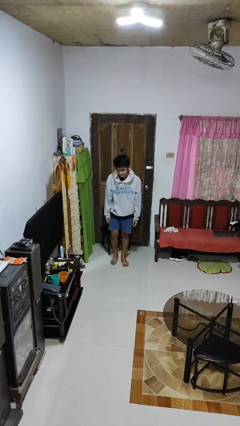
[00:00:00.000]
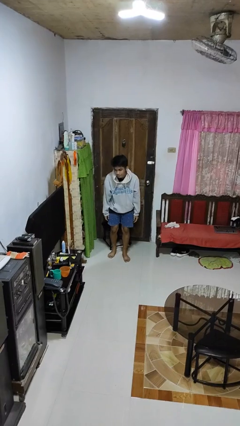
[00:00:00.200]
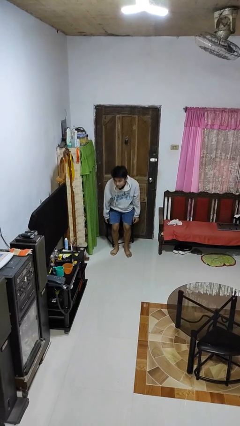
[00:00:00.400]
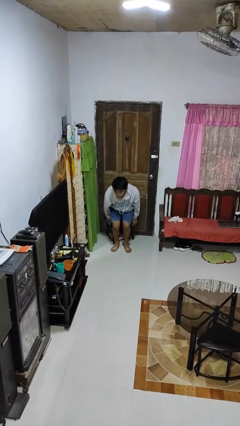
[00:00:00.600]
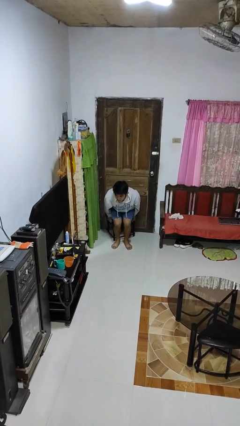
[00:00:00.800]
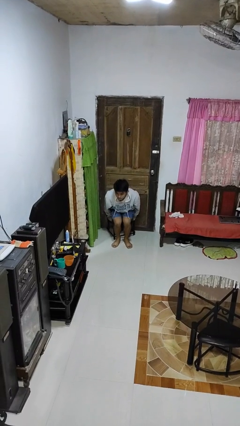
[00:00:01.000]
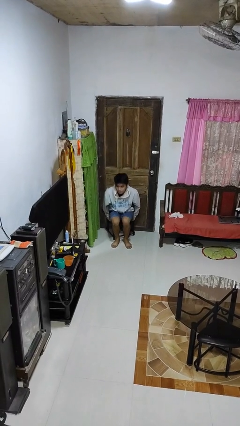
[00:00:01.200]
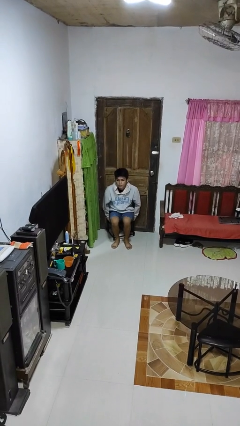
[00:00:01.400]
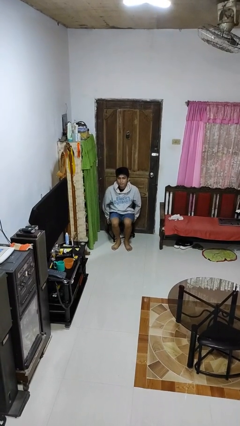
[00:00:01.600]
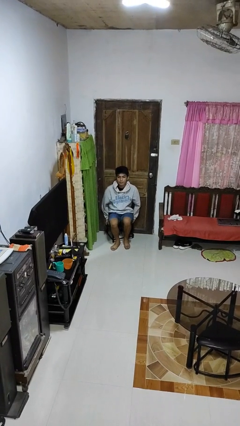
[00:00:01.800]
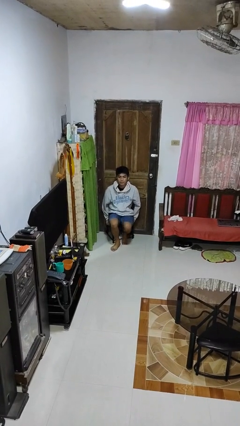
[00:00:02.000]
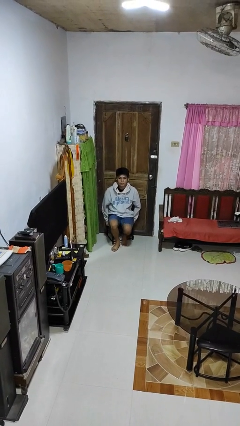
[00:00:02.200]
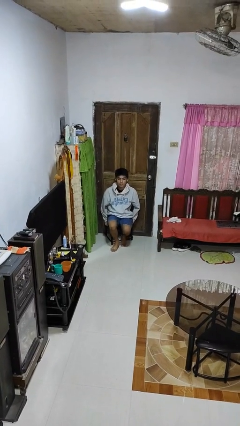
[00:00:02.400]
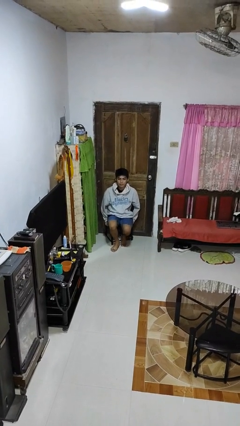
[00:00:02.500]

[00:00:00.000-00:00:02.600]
person sits down

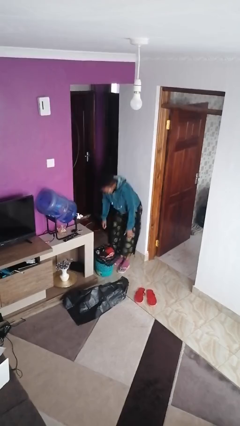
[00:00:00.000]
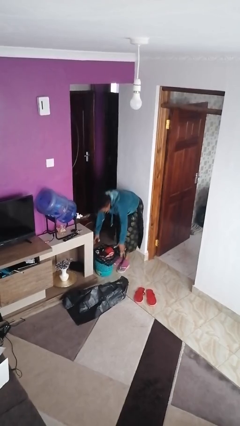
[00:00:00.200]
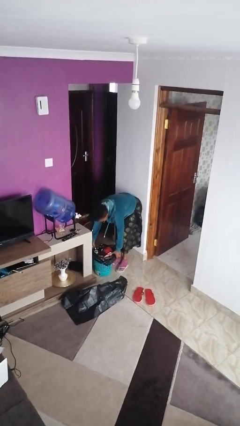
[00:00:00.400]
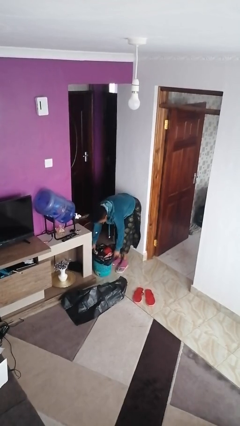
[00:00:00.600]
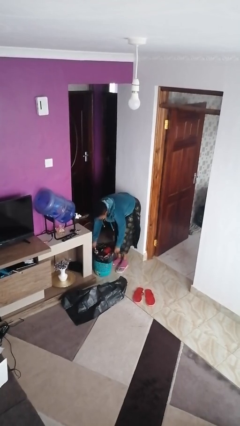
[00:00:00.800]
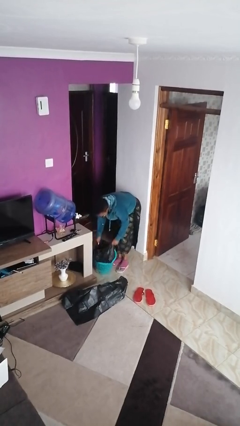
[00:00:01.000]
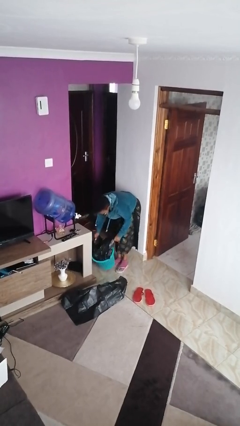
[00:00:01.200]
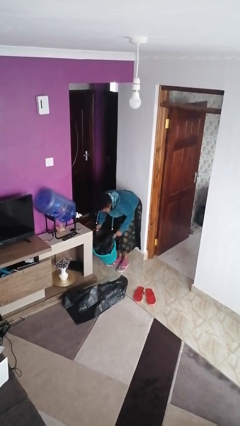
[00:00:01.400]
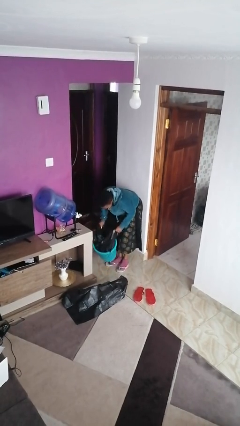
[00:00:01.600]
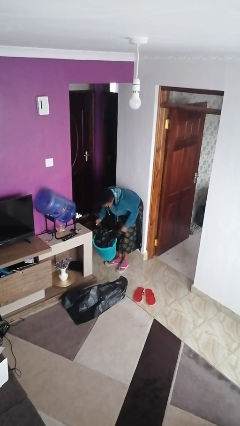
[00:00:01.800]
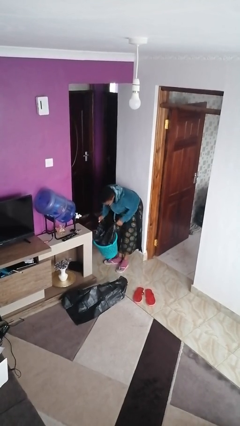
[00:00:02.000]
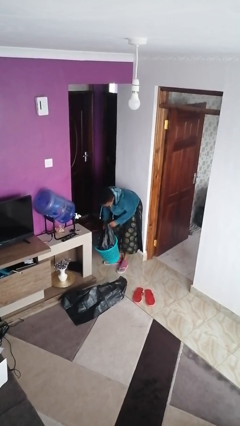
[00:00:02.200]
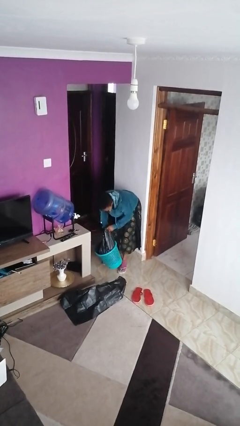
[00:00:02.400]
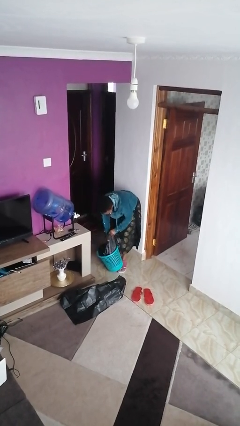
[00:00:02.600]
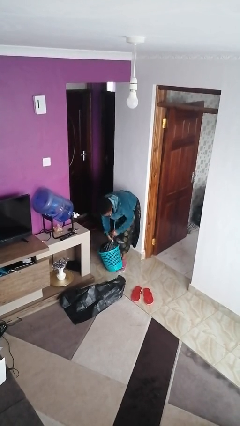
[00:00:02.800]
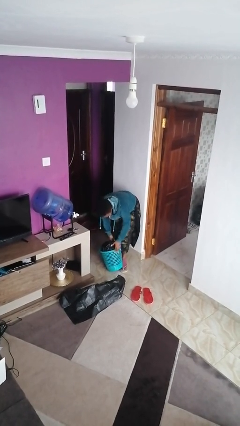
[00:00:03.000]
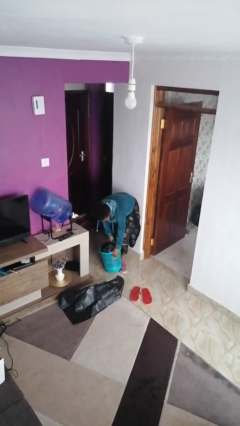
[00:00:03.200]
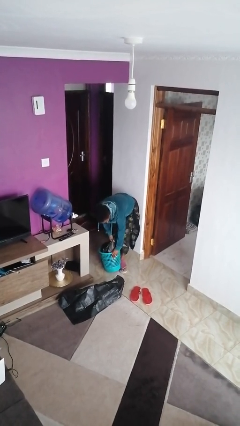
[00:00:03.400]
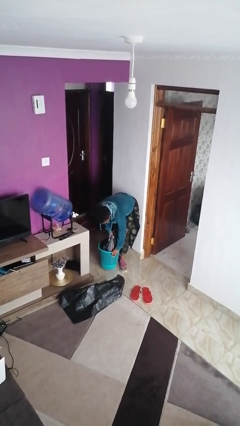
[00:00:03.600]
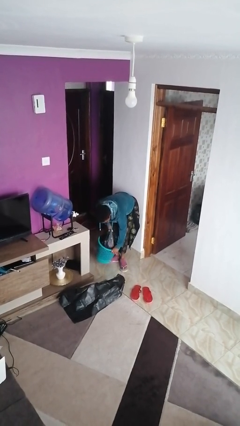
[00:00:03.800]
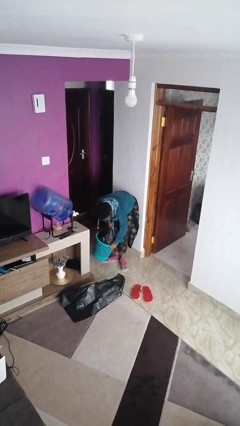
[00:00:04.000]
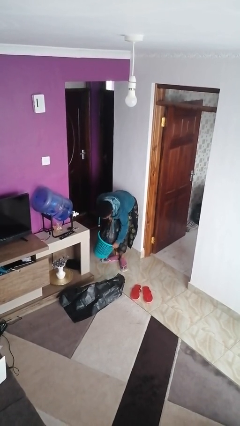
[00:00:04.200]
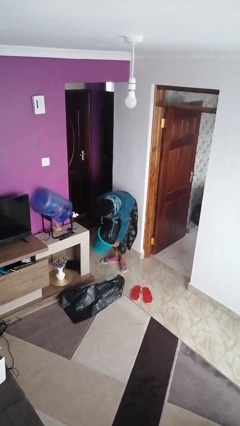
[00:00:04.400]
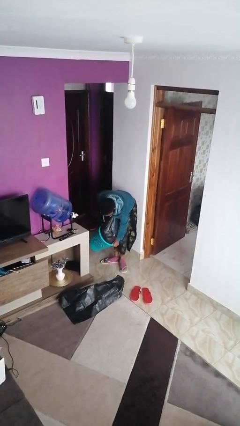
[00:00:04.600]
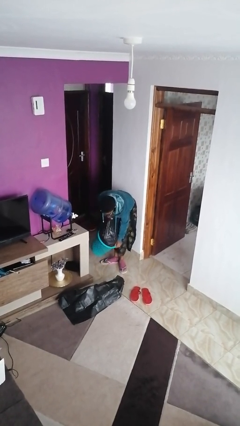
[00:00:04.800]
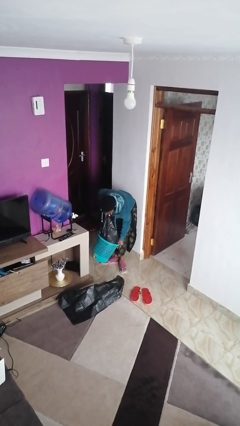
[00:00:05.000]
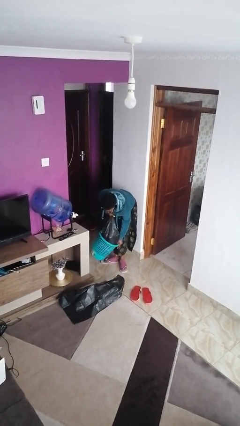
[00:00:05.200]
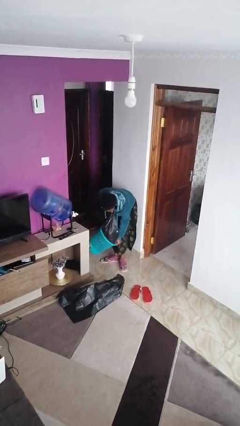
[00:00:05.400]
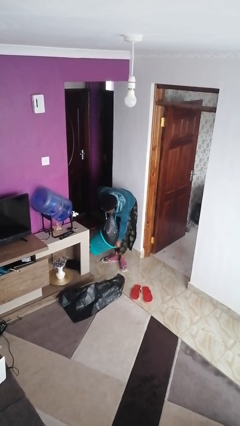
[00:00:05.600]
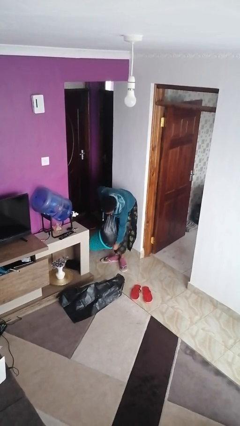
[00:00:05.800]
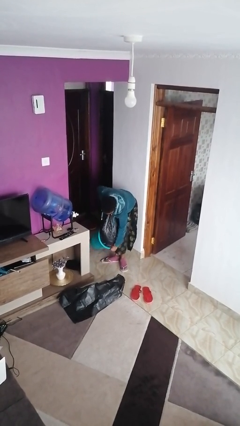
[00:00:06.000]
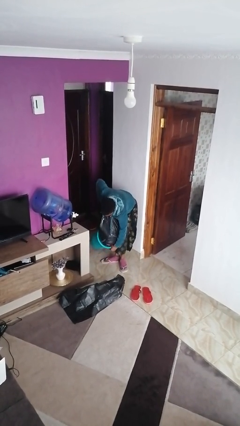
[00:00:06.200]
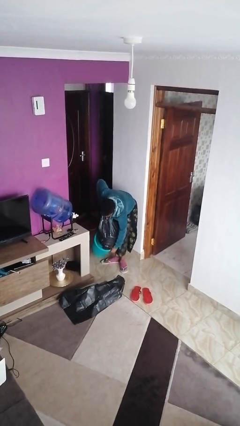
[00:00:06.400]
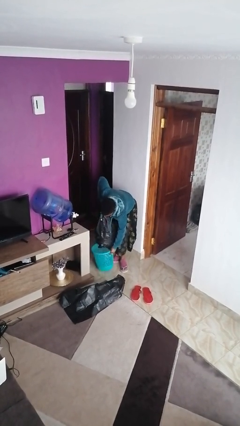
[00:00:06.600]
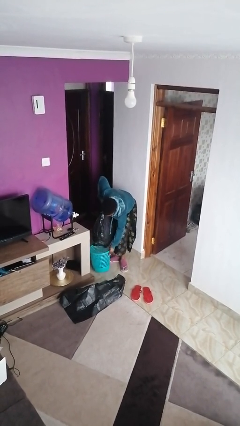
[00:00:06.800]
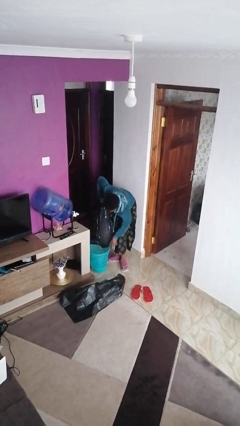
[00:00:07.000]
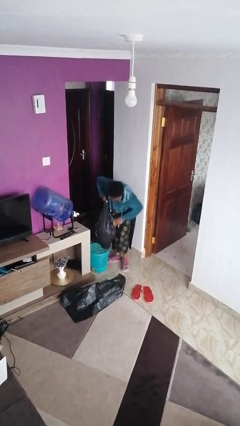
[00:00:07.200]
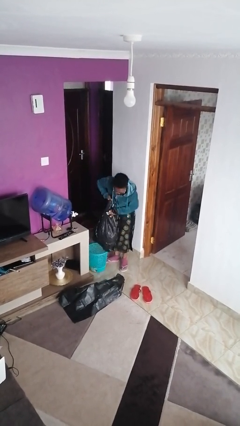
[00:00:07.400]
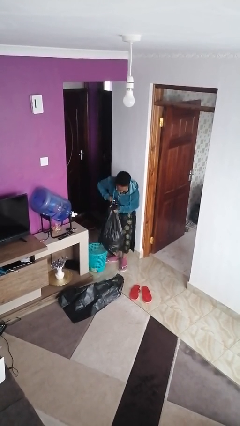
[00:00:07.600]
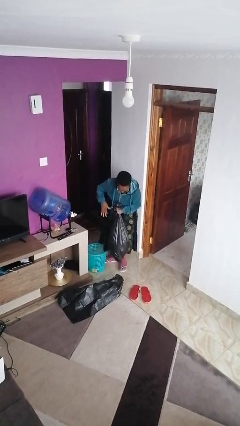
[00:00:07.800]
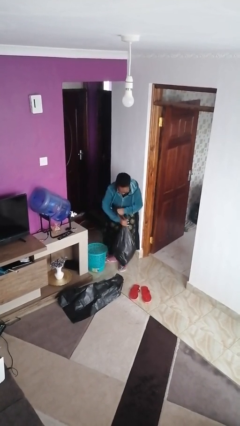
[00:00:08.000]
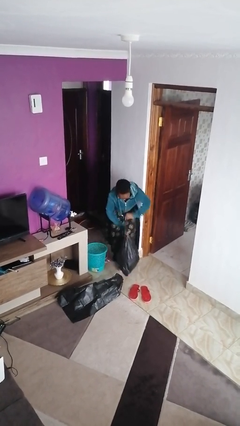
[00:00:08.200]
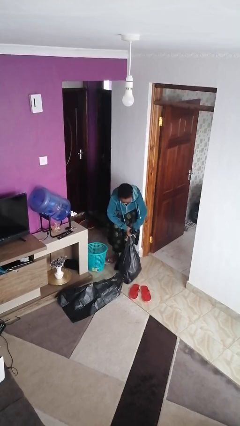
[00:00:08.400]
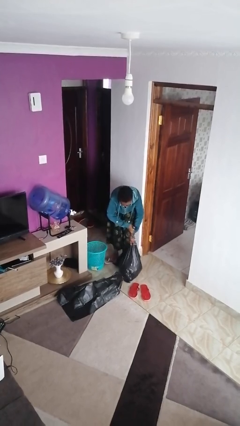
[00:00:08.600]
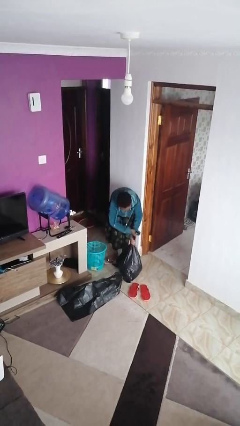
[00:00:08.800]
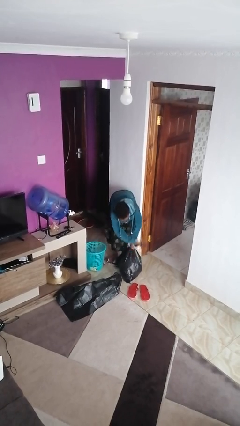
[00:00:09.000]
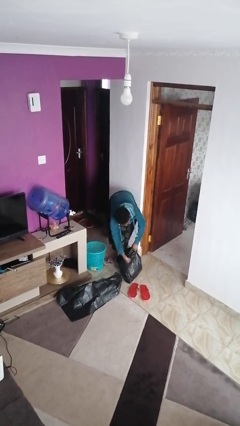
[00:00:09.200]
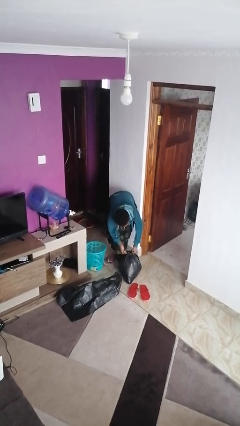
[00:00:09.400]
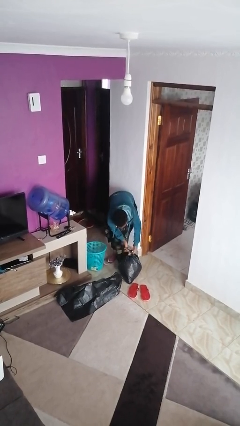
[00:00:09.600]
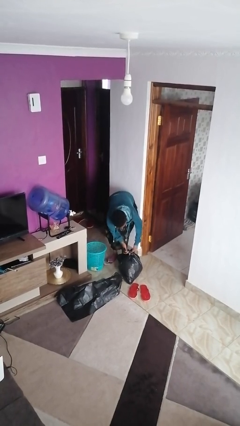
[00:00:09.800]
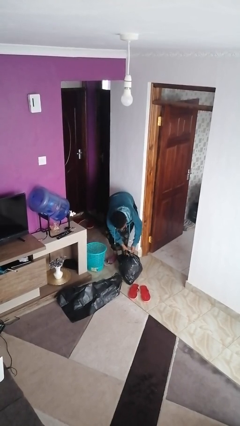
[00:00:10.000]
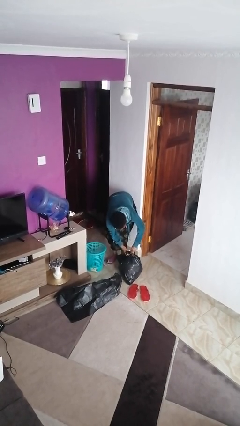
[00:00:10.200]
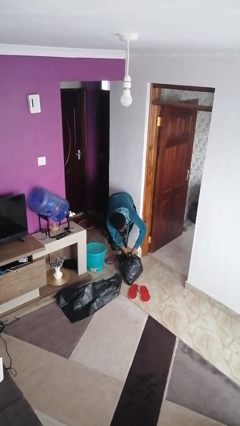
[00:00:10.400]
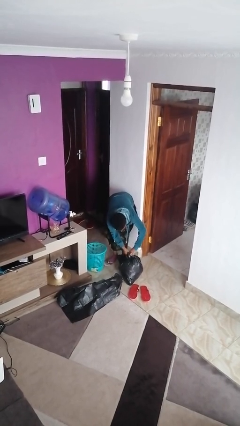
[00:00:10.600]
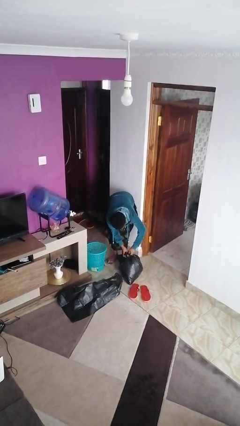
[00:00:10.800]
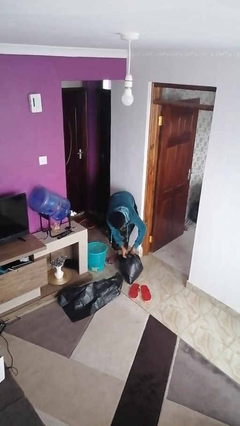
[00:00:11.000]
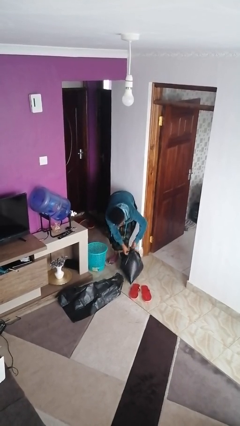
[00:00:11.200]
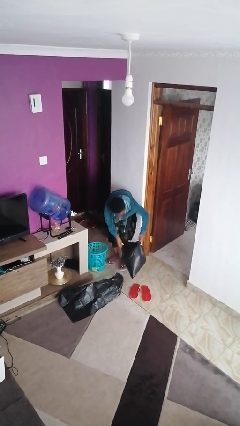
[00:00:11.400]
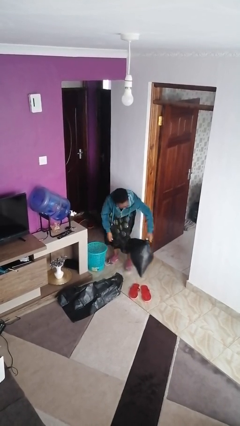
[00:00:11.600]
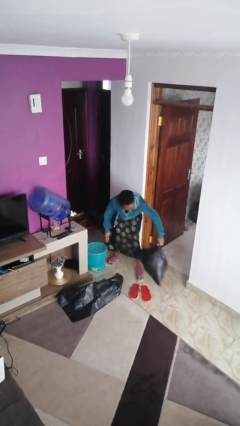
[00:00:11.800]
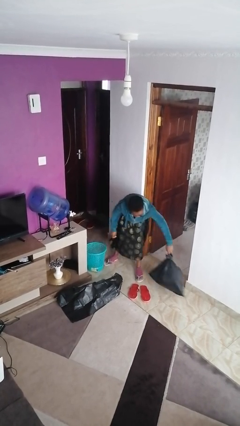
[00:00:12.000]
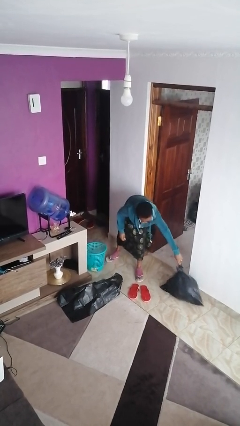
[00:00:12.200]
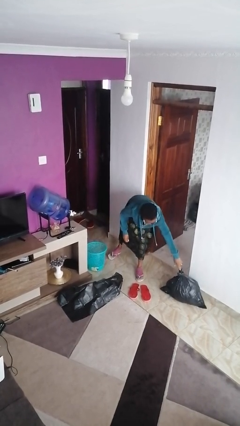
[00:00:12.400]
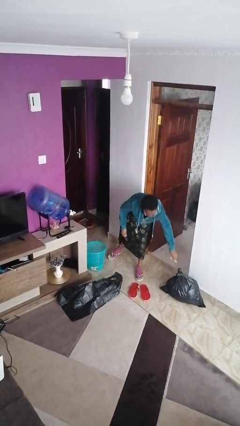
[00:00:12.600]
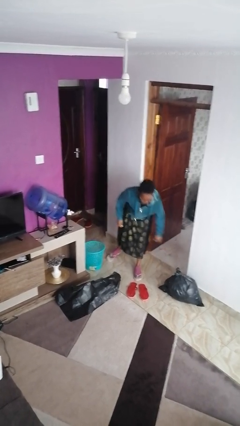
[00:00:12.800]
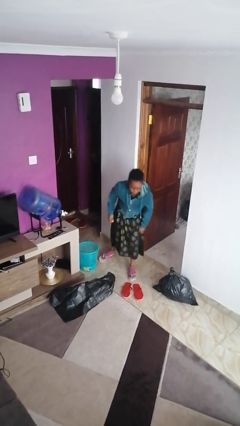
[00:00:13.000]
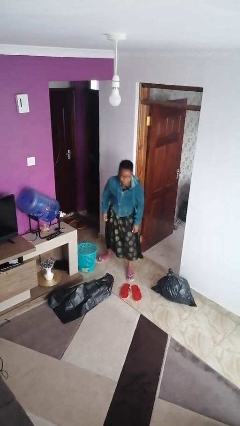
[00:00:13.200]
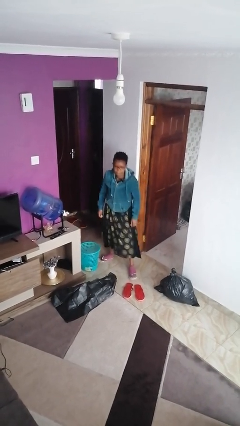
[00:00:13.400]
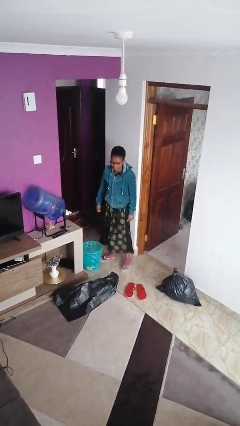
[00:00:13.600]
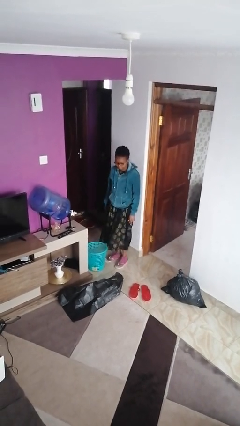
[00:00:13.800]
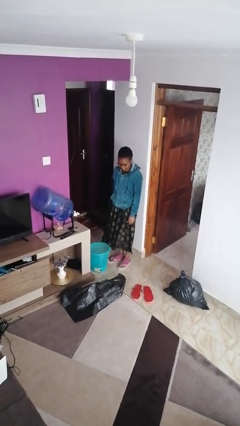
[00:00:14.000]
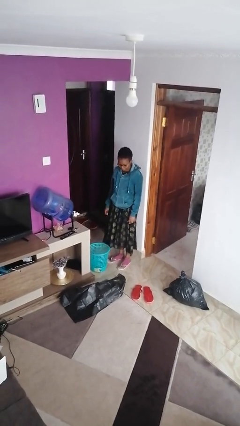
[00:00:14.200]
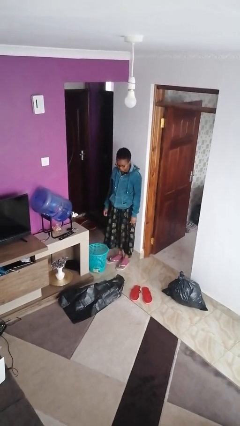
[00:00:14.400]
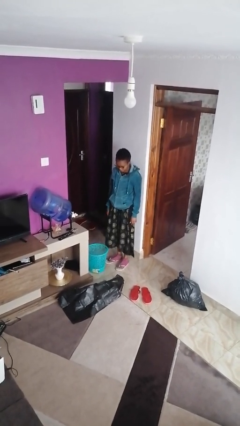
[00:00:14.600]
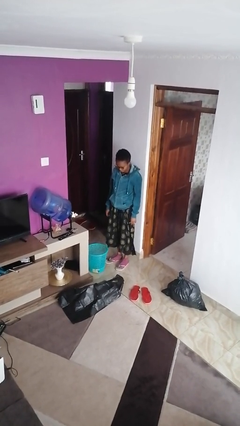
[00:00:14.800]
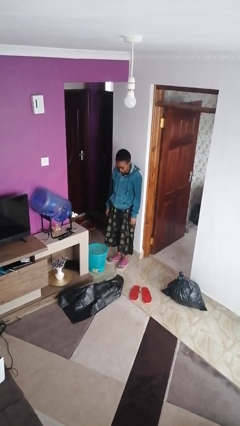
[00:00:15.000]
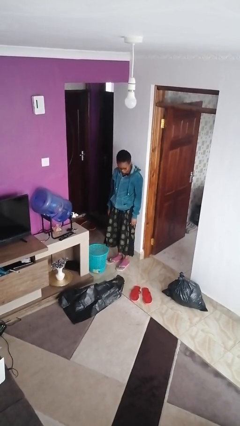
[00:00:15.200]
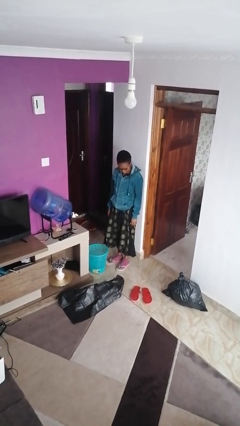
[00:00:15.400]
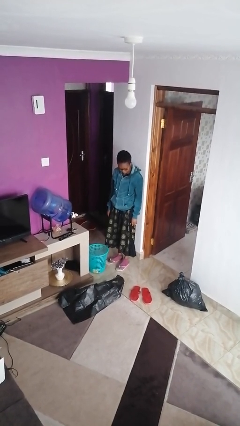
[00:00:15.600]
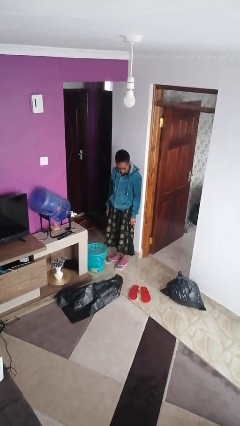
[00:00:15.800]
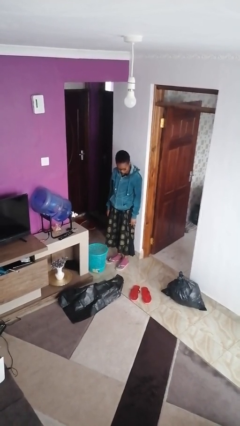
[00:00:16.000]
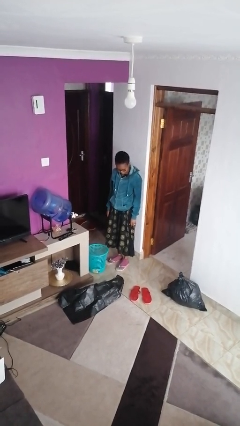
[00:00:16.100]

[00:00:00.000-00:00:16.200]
person removes trashbag from trashcan
